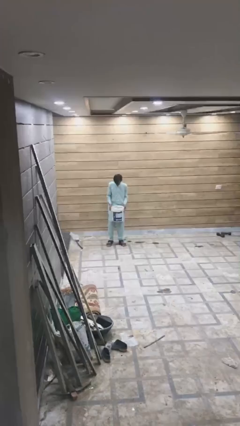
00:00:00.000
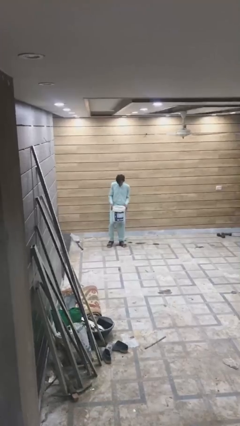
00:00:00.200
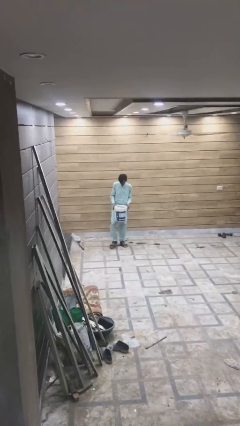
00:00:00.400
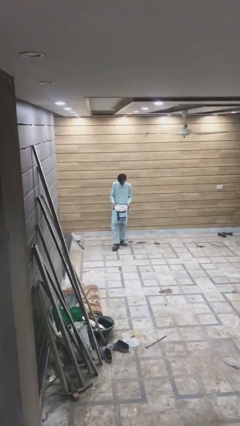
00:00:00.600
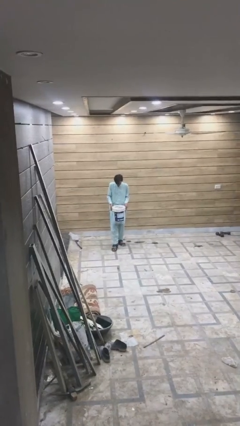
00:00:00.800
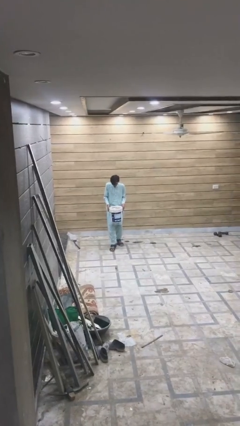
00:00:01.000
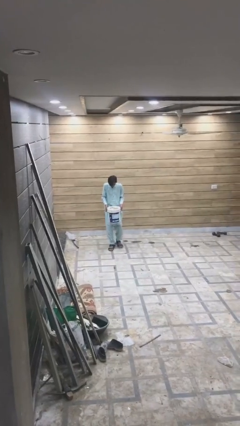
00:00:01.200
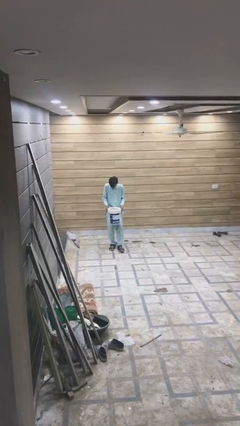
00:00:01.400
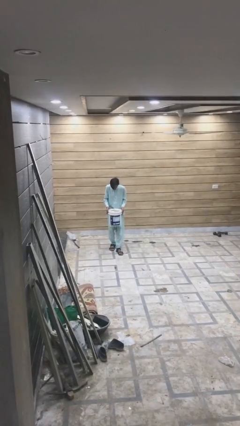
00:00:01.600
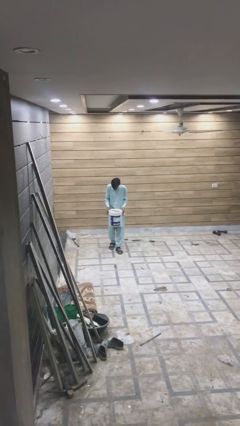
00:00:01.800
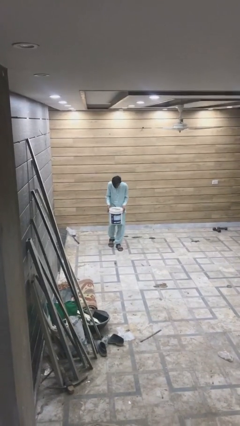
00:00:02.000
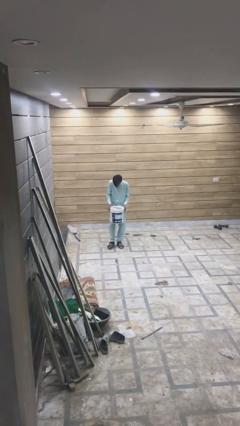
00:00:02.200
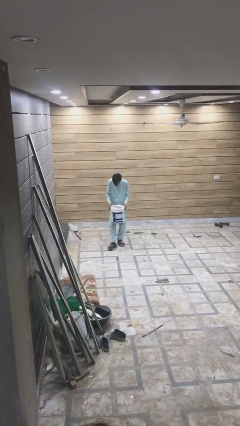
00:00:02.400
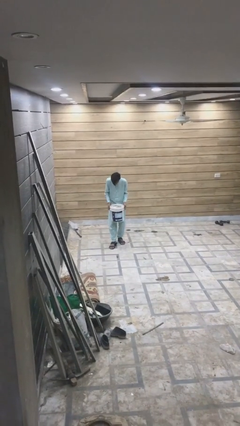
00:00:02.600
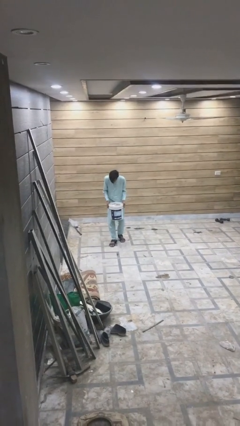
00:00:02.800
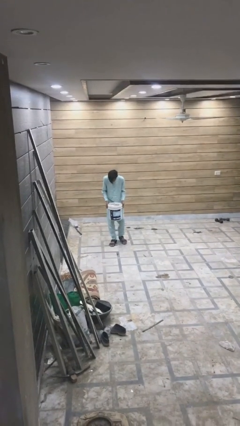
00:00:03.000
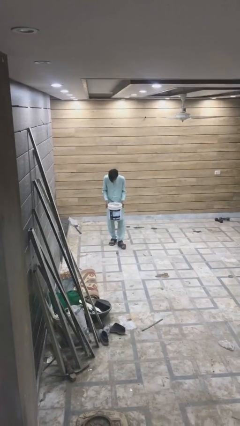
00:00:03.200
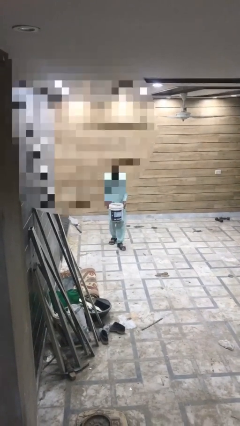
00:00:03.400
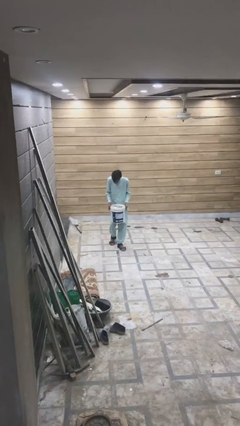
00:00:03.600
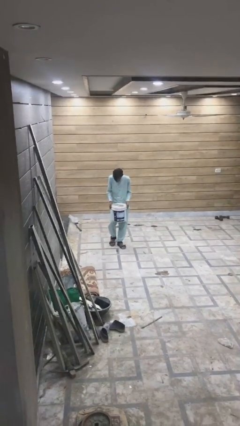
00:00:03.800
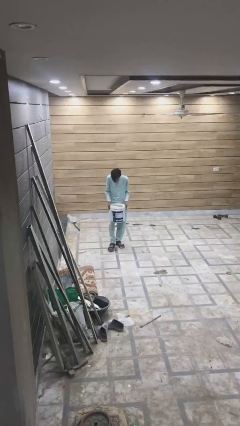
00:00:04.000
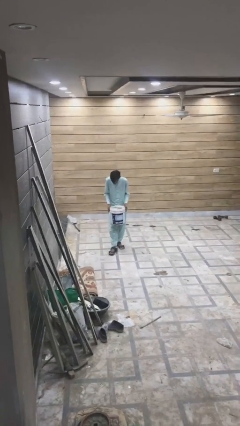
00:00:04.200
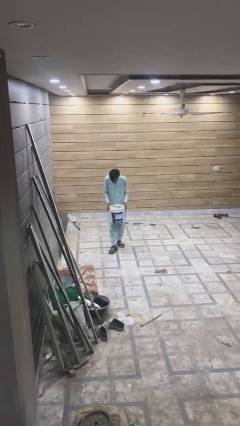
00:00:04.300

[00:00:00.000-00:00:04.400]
person carries heavy object

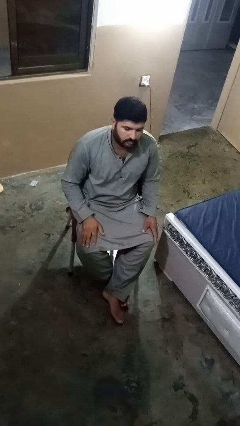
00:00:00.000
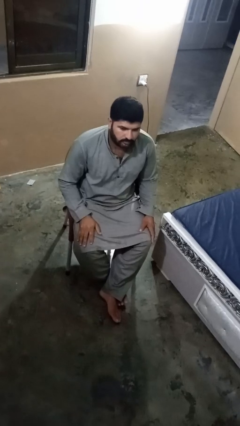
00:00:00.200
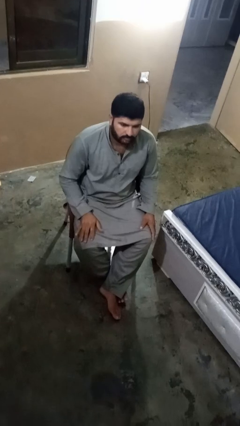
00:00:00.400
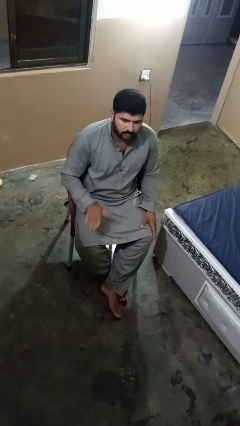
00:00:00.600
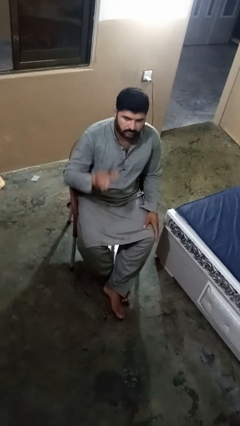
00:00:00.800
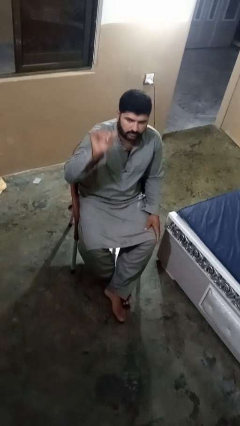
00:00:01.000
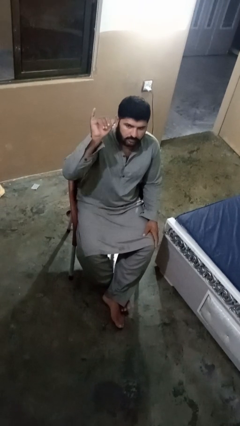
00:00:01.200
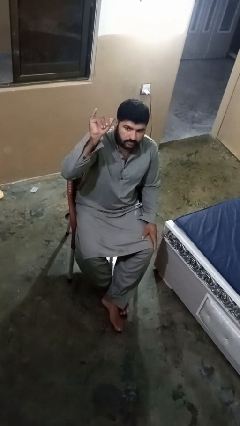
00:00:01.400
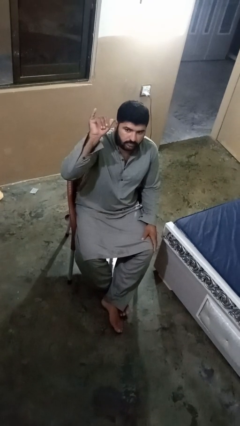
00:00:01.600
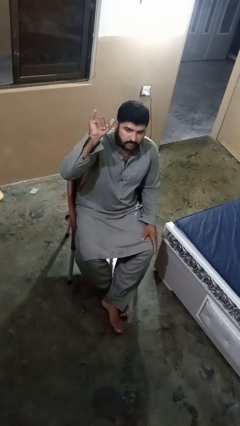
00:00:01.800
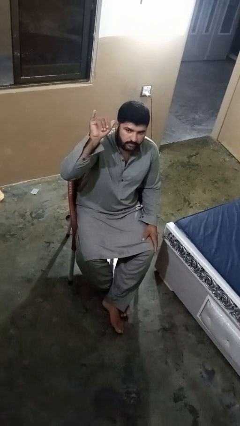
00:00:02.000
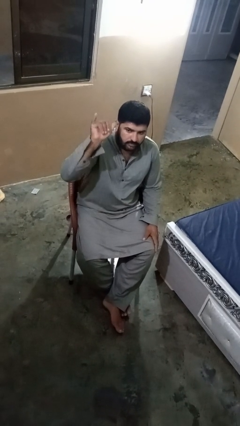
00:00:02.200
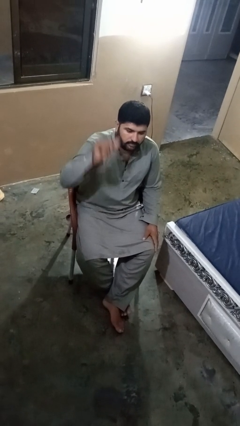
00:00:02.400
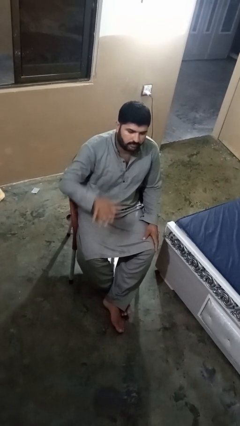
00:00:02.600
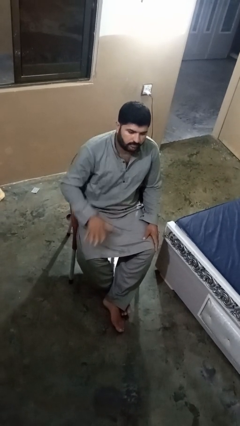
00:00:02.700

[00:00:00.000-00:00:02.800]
person gestures hang loose

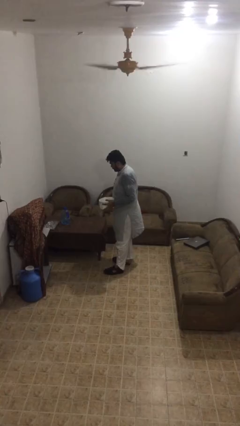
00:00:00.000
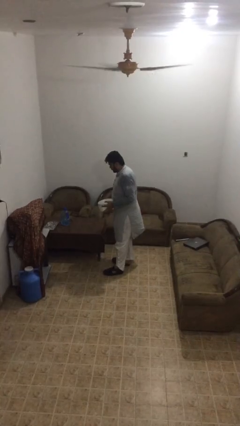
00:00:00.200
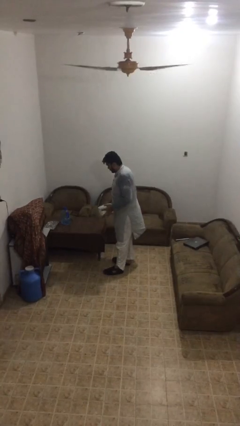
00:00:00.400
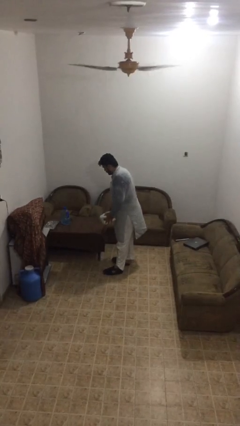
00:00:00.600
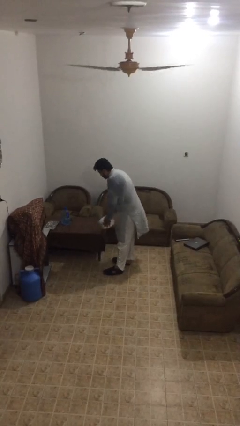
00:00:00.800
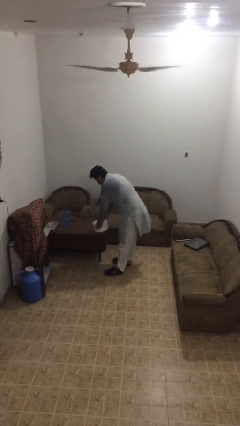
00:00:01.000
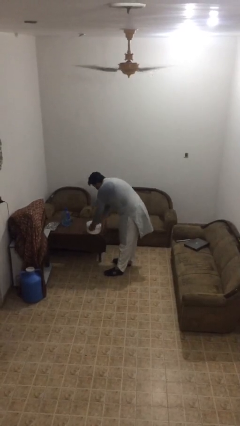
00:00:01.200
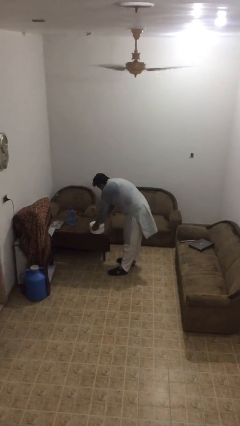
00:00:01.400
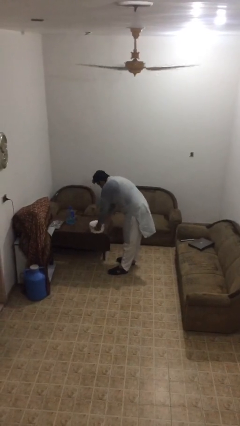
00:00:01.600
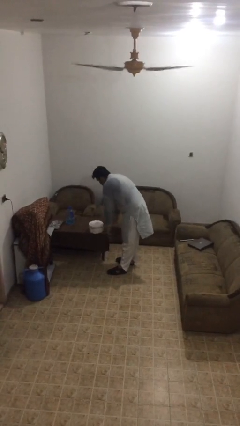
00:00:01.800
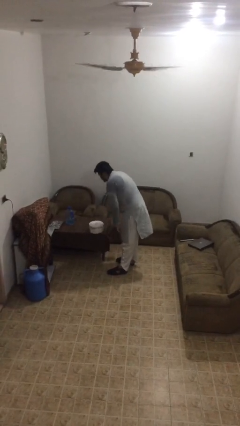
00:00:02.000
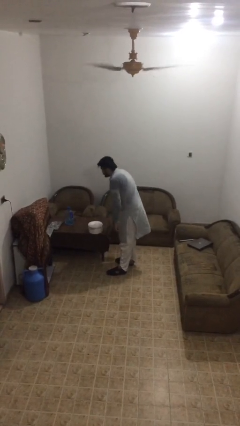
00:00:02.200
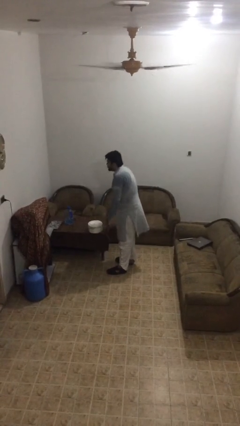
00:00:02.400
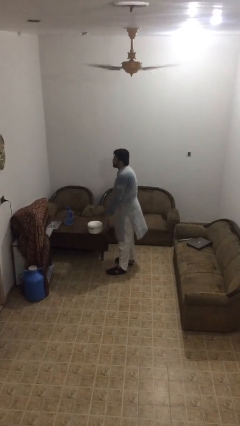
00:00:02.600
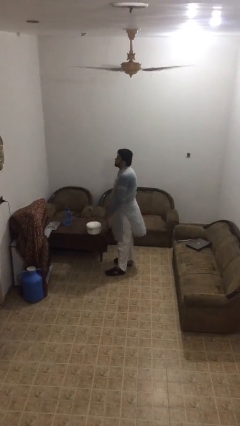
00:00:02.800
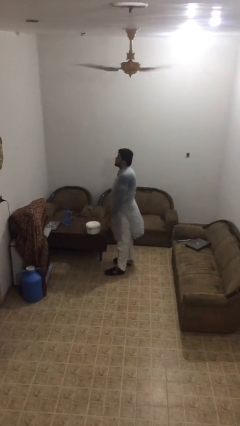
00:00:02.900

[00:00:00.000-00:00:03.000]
person puts down object on table

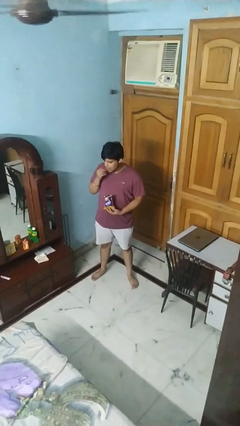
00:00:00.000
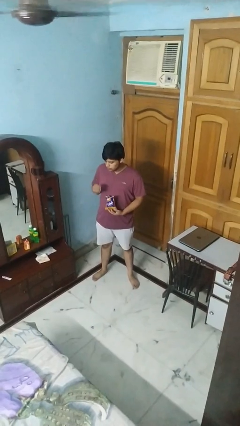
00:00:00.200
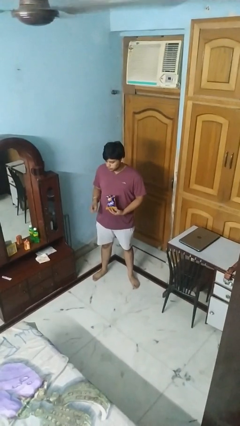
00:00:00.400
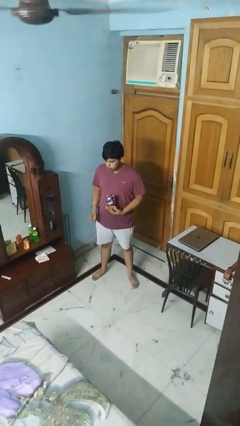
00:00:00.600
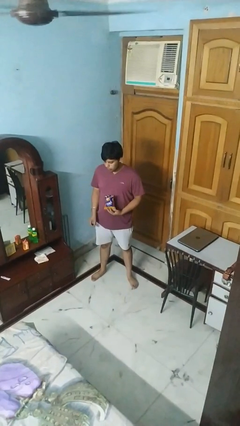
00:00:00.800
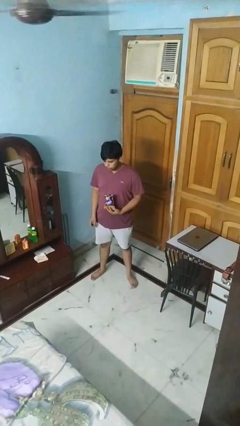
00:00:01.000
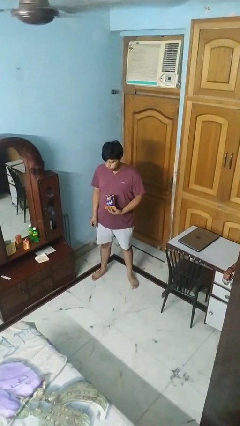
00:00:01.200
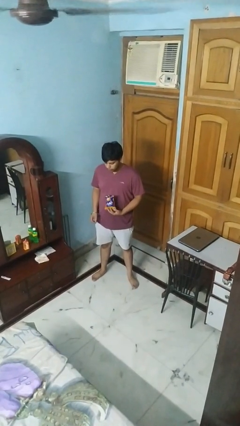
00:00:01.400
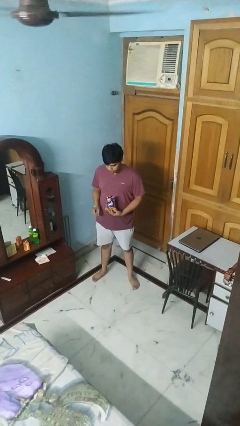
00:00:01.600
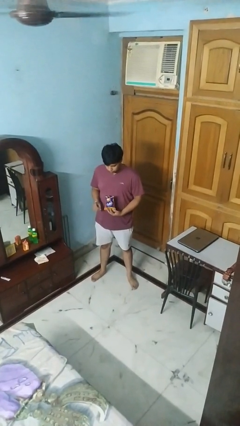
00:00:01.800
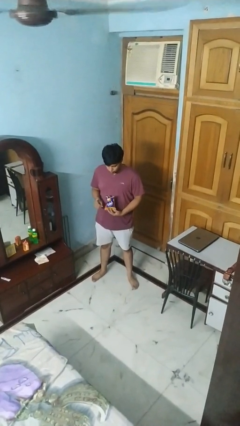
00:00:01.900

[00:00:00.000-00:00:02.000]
person eats snack from bag

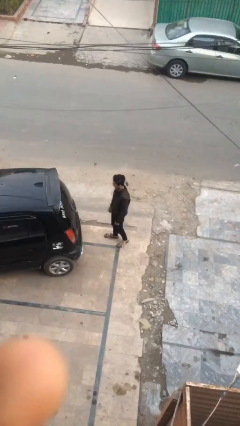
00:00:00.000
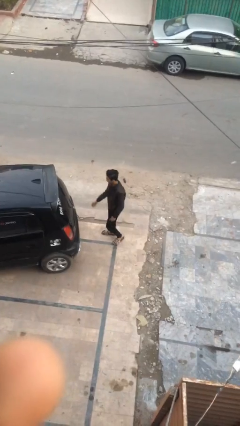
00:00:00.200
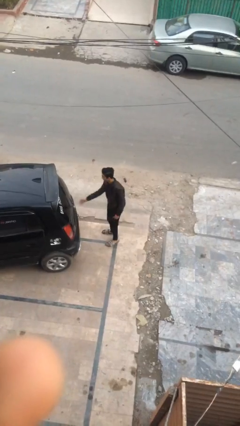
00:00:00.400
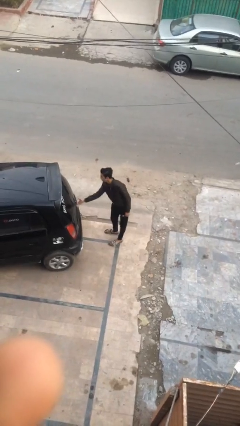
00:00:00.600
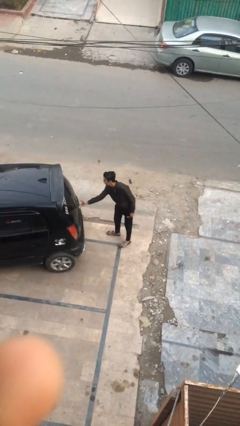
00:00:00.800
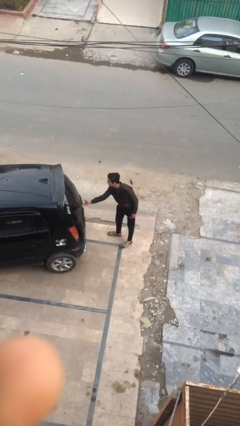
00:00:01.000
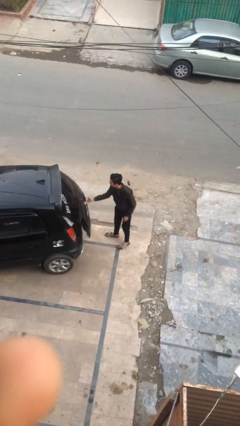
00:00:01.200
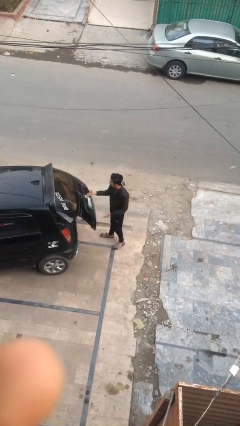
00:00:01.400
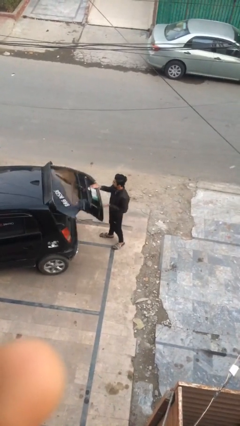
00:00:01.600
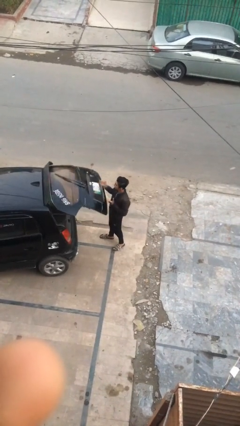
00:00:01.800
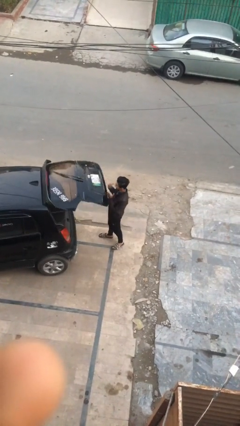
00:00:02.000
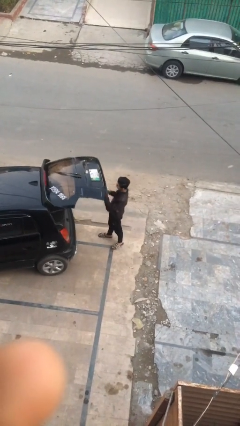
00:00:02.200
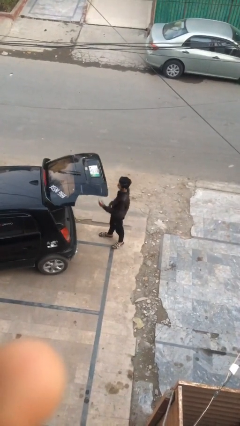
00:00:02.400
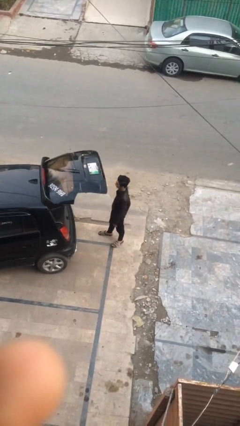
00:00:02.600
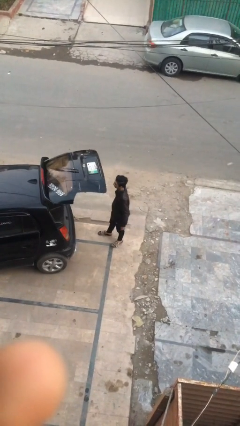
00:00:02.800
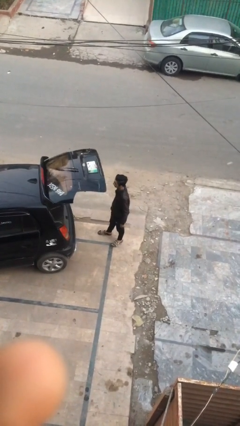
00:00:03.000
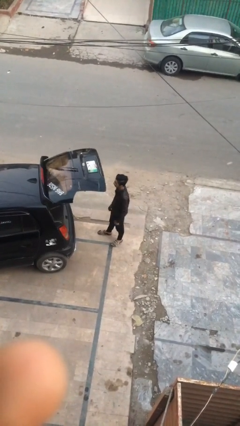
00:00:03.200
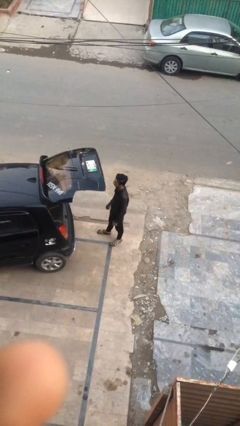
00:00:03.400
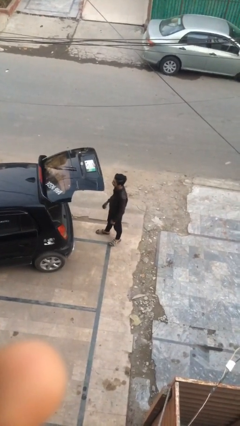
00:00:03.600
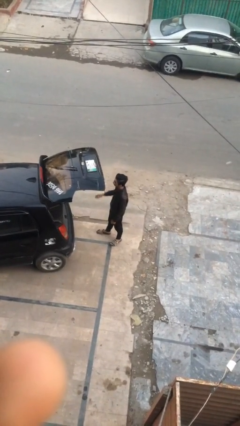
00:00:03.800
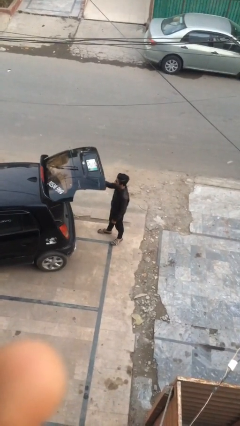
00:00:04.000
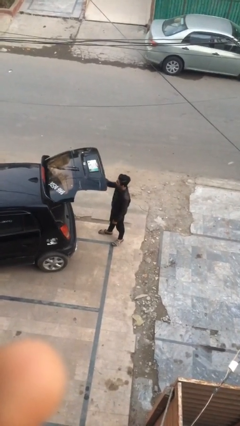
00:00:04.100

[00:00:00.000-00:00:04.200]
person opens car trunk

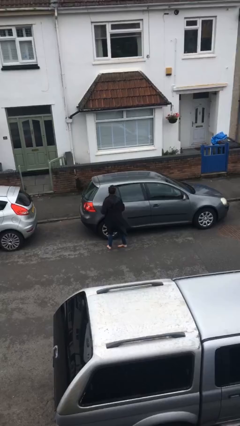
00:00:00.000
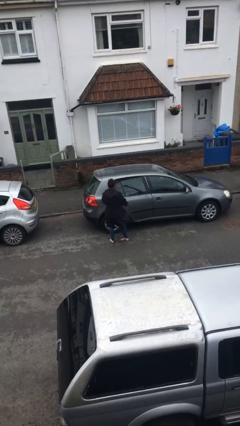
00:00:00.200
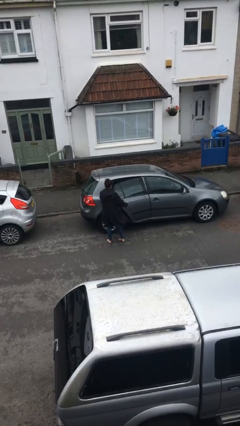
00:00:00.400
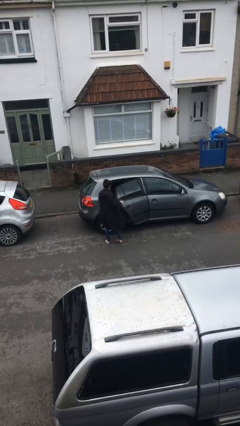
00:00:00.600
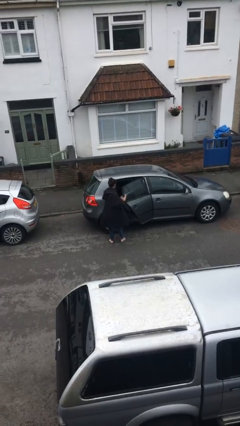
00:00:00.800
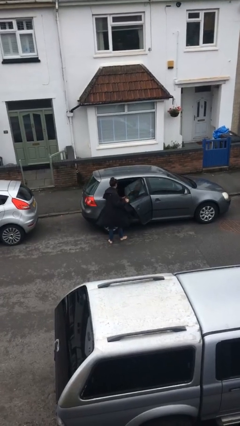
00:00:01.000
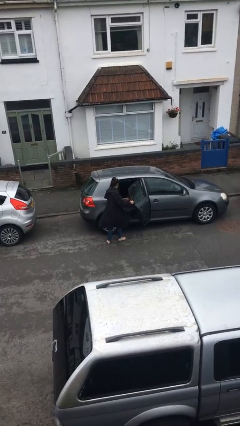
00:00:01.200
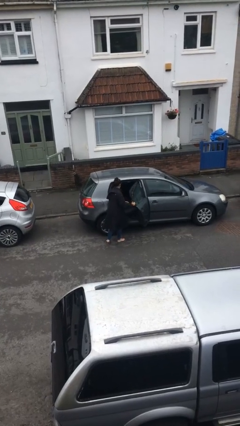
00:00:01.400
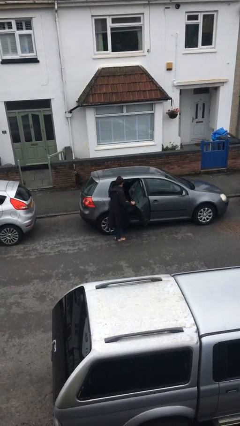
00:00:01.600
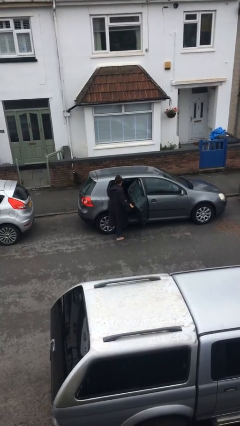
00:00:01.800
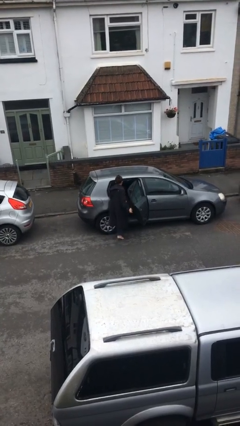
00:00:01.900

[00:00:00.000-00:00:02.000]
person opens car door
